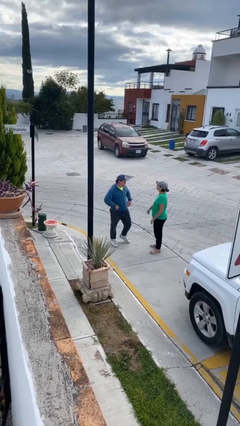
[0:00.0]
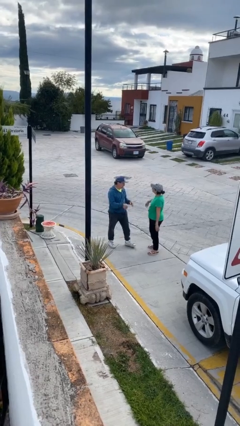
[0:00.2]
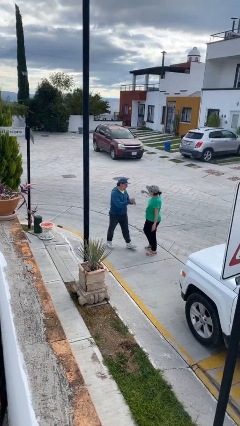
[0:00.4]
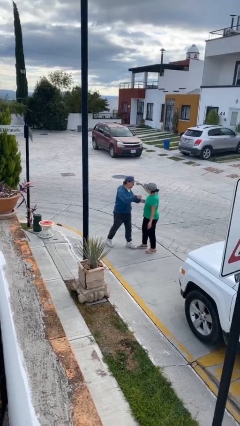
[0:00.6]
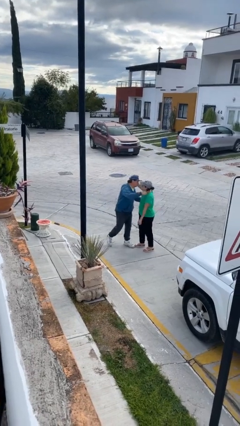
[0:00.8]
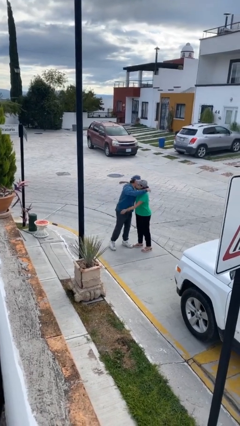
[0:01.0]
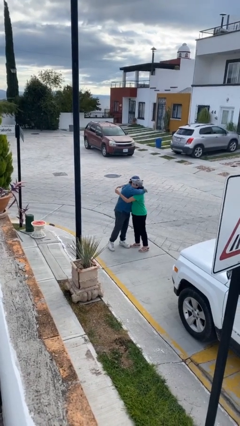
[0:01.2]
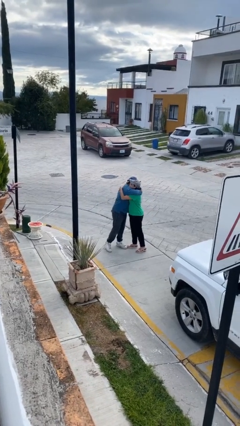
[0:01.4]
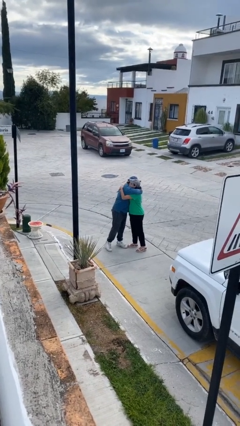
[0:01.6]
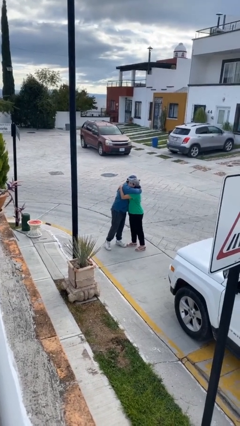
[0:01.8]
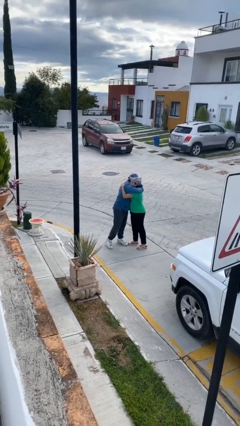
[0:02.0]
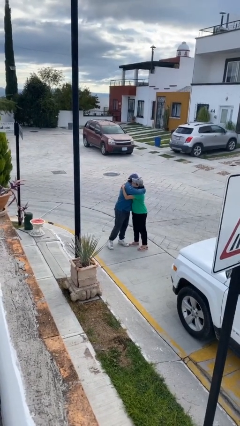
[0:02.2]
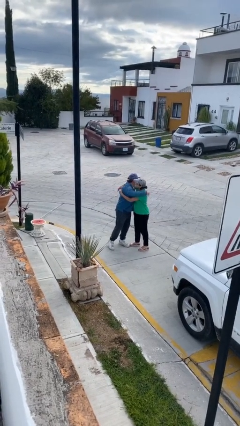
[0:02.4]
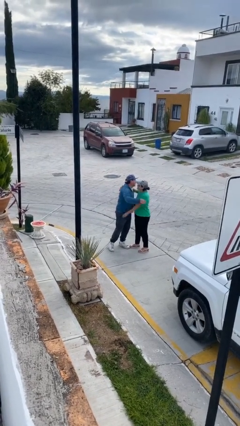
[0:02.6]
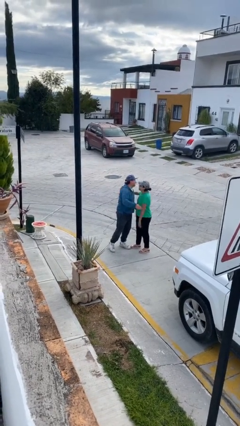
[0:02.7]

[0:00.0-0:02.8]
person embraces person

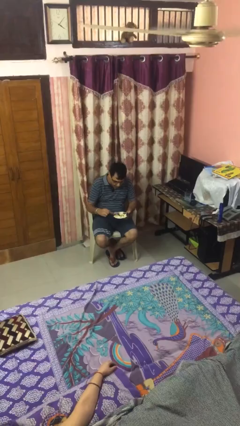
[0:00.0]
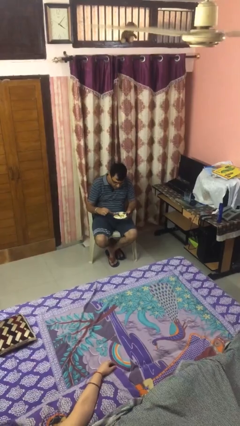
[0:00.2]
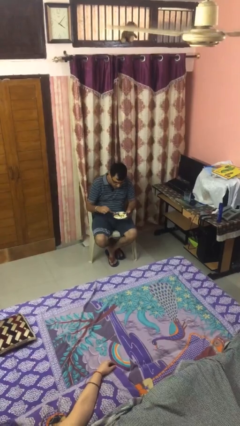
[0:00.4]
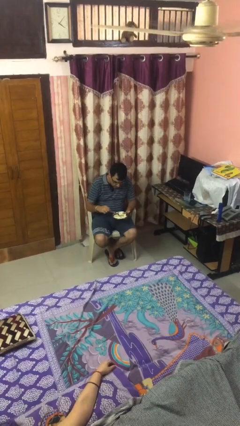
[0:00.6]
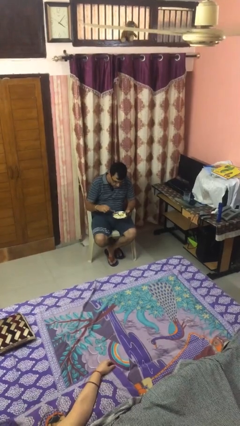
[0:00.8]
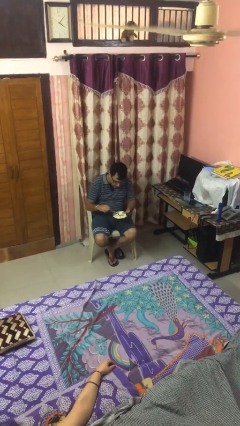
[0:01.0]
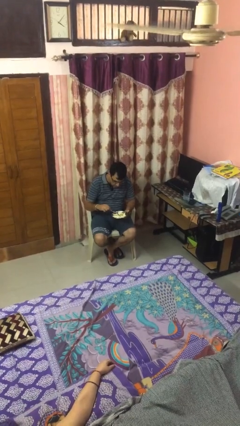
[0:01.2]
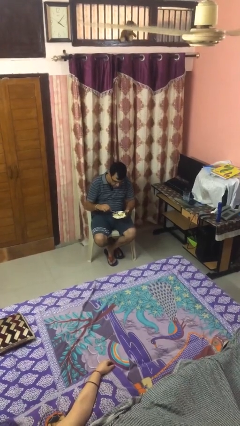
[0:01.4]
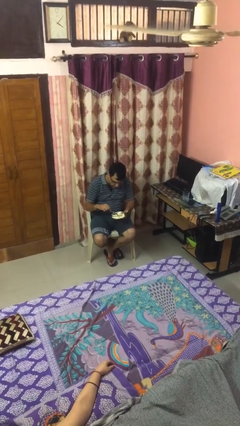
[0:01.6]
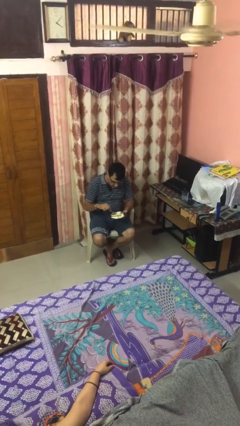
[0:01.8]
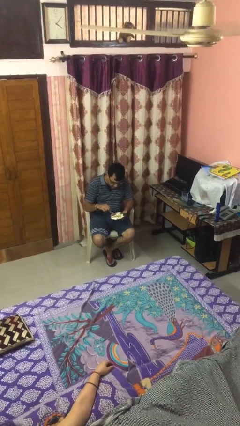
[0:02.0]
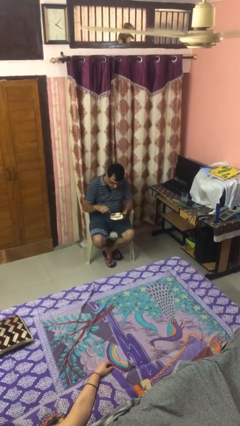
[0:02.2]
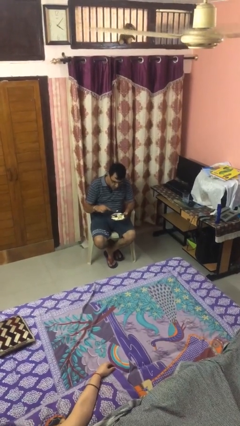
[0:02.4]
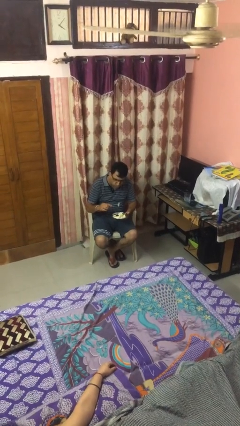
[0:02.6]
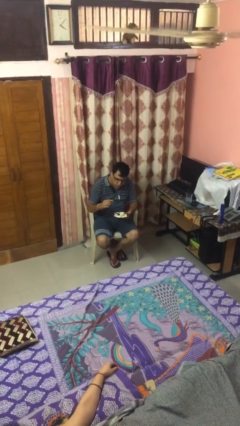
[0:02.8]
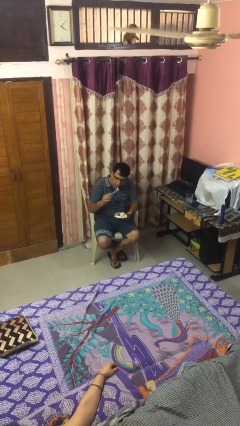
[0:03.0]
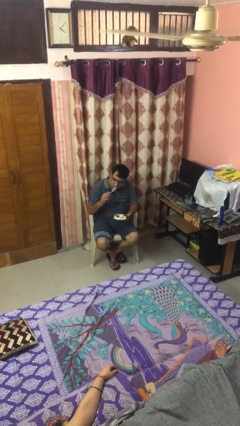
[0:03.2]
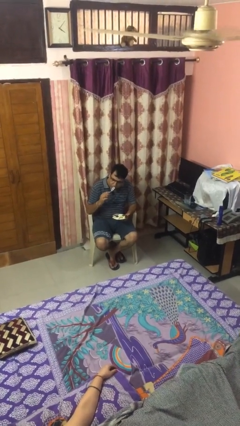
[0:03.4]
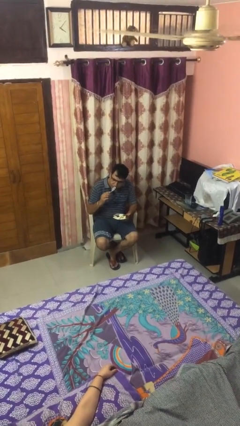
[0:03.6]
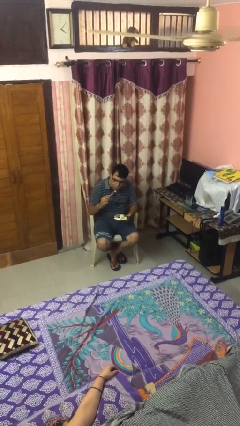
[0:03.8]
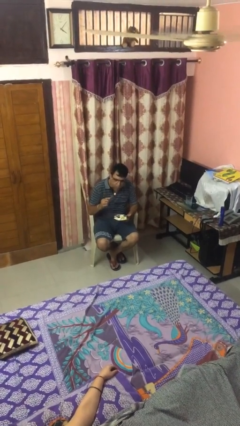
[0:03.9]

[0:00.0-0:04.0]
person eats with utensil

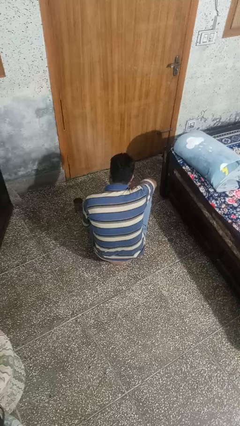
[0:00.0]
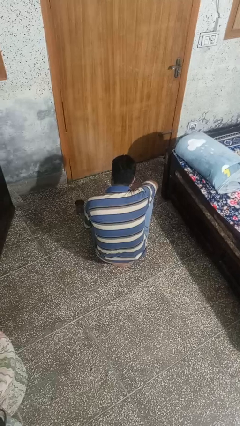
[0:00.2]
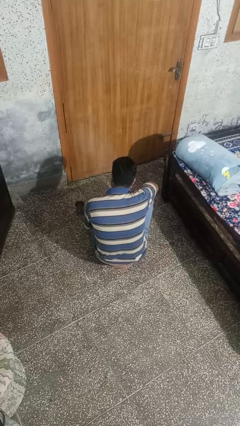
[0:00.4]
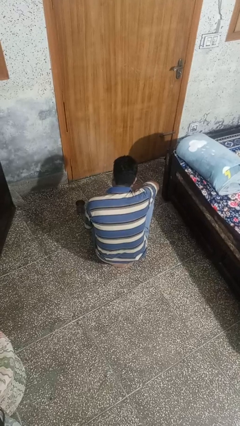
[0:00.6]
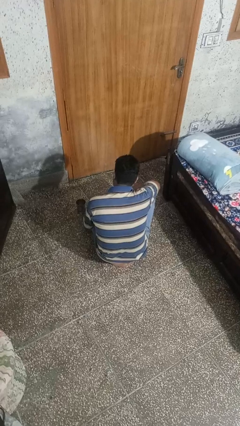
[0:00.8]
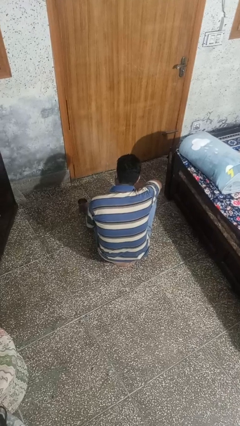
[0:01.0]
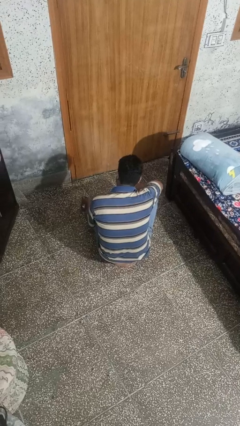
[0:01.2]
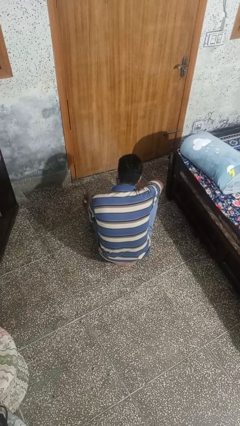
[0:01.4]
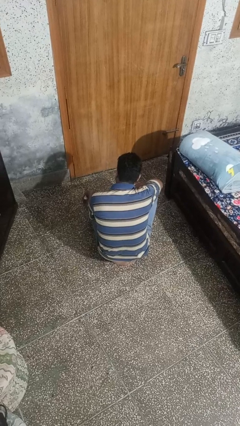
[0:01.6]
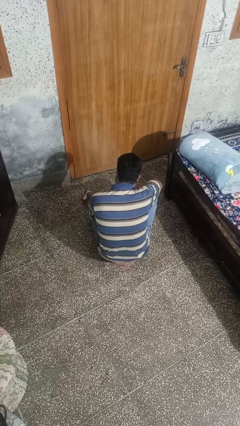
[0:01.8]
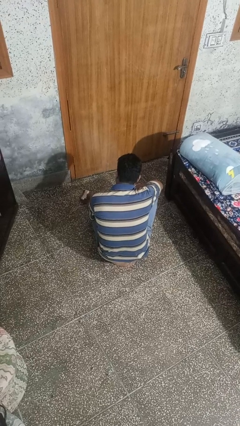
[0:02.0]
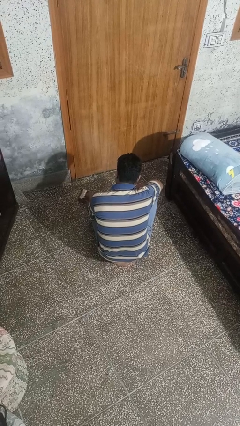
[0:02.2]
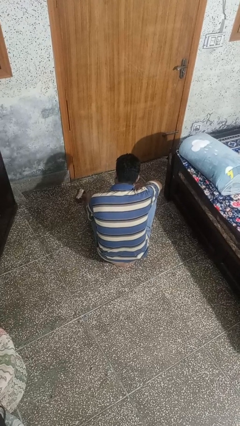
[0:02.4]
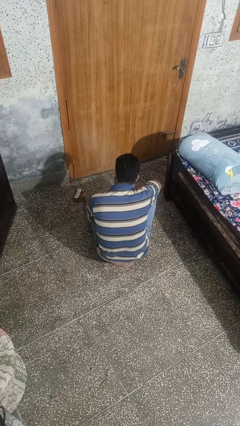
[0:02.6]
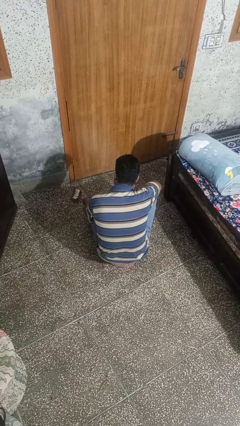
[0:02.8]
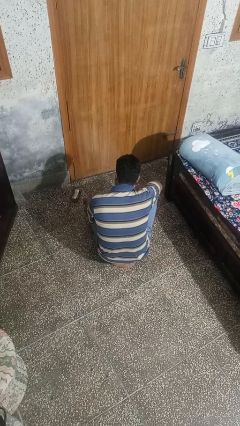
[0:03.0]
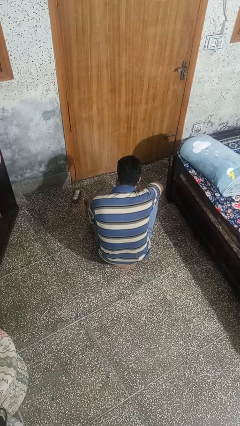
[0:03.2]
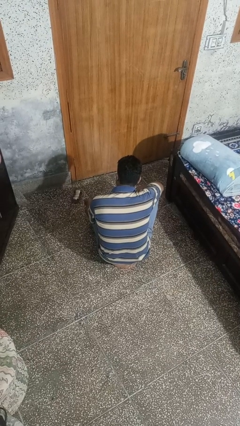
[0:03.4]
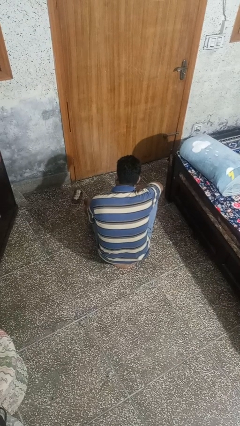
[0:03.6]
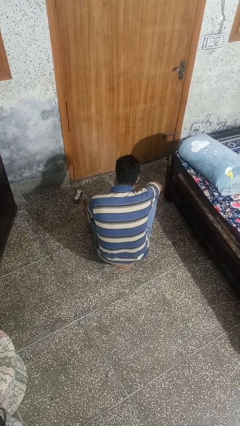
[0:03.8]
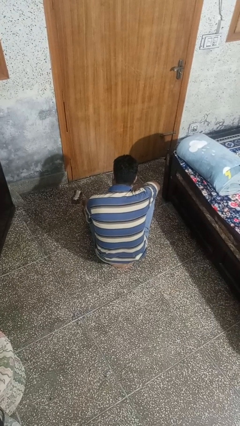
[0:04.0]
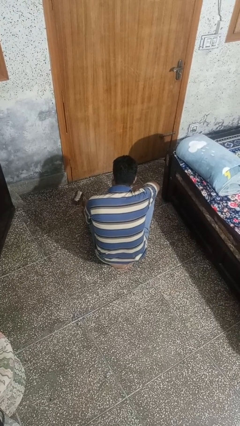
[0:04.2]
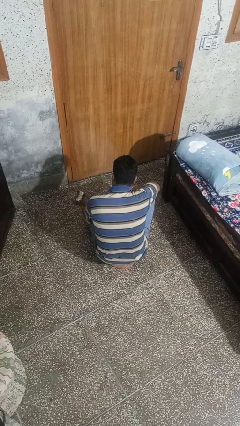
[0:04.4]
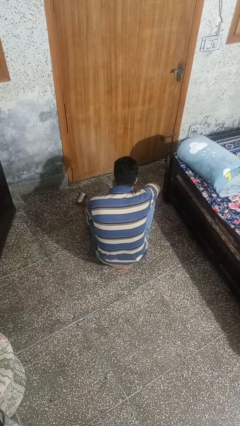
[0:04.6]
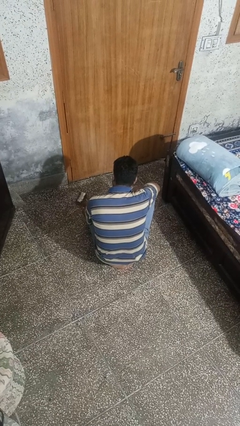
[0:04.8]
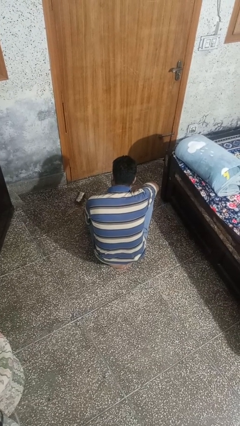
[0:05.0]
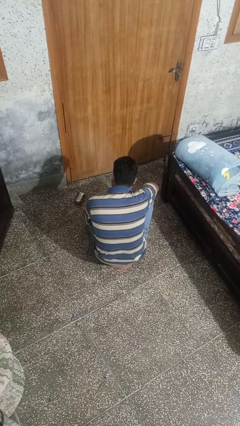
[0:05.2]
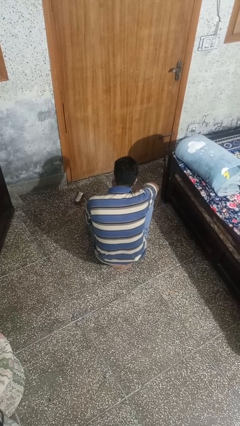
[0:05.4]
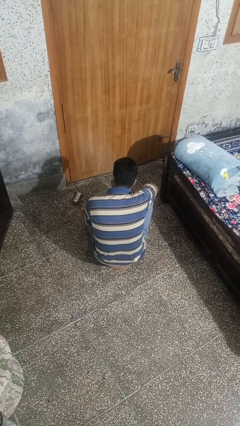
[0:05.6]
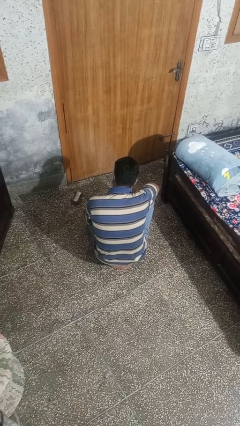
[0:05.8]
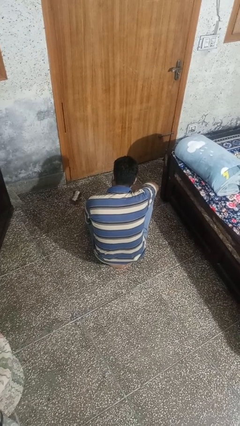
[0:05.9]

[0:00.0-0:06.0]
person spills on floor

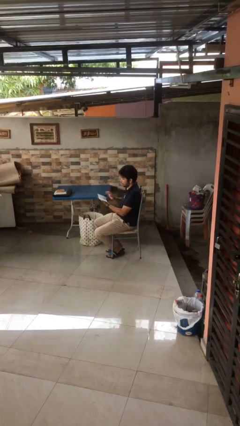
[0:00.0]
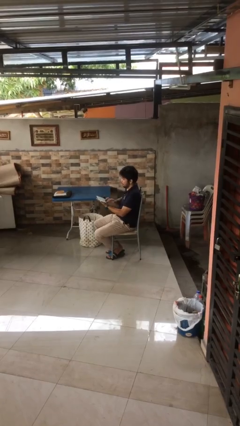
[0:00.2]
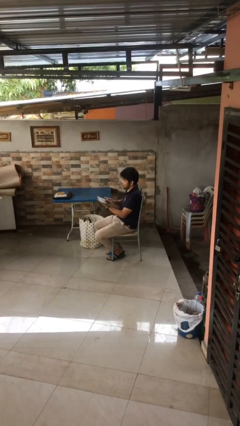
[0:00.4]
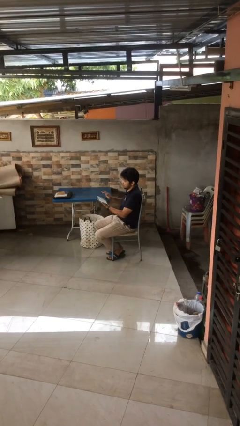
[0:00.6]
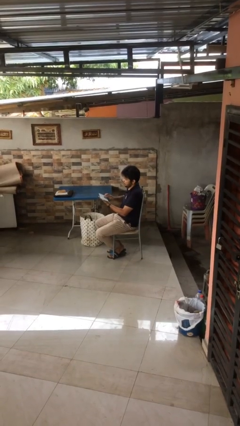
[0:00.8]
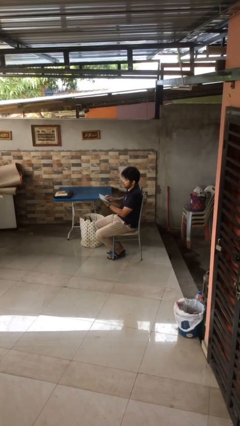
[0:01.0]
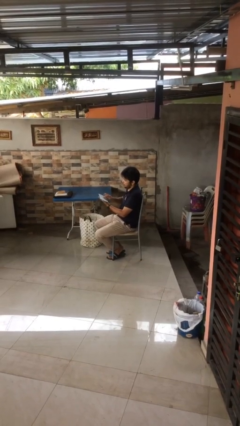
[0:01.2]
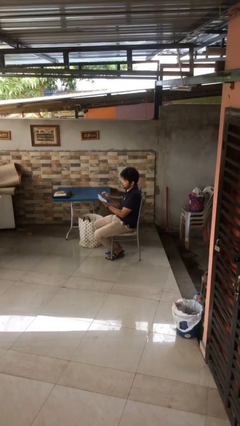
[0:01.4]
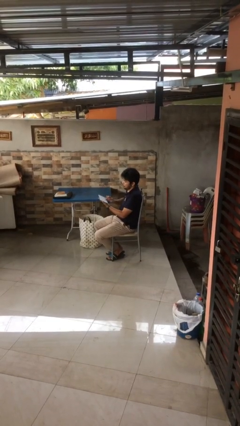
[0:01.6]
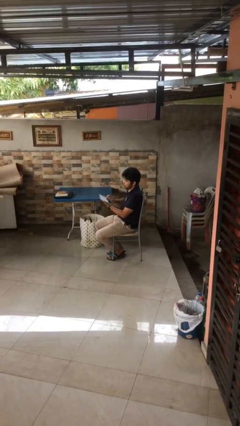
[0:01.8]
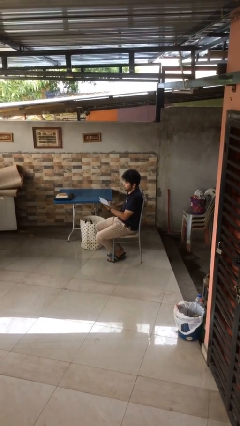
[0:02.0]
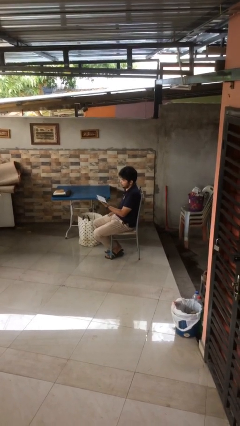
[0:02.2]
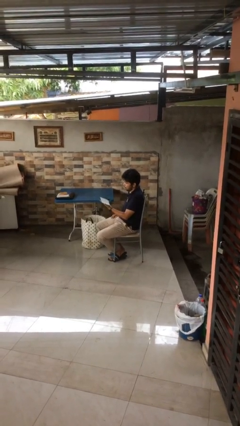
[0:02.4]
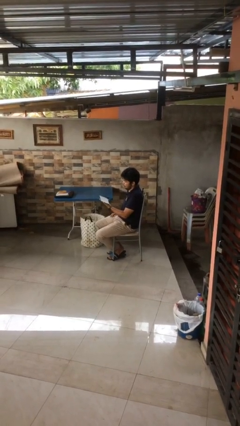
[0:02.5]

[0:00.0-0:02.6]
person interacts with tablet

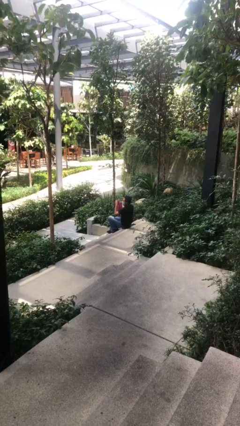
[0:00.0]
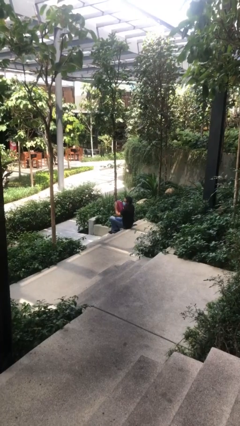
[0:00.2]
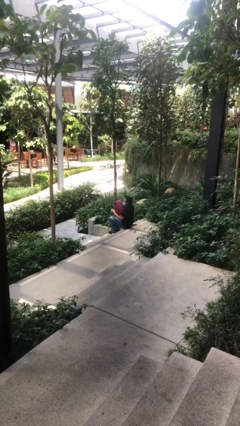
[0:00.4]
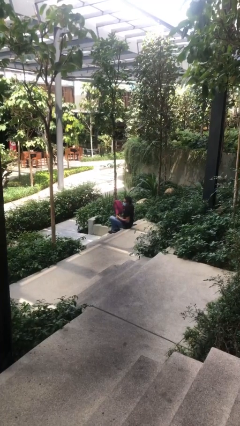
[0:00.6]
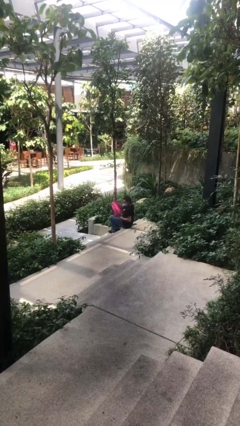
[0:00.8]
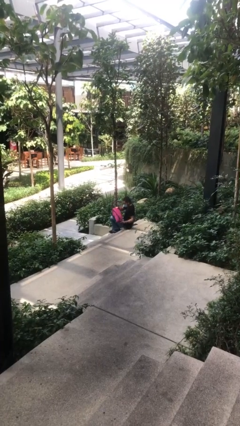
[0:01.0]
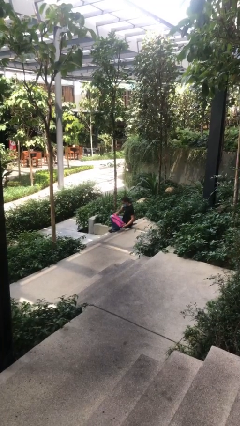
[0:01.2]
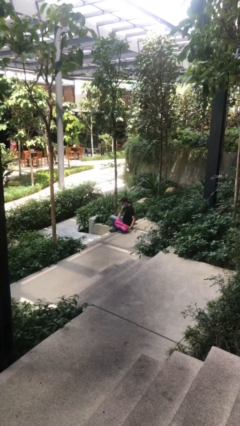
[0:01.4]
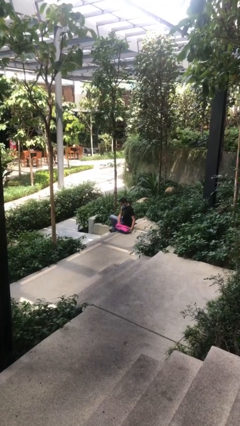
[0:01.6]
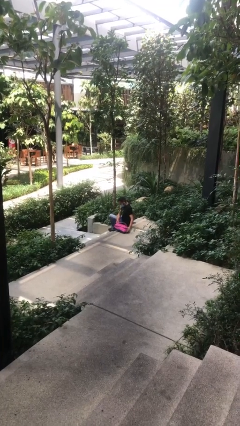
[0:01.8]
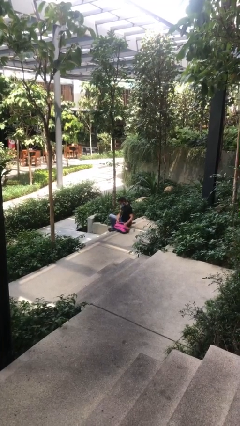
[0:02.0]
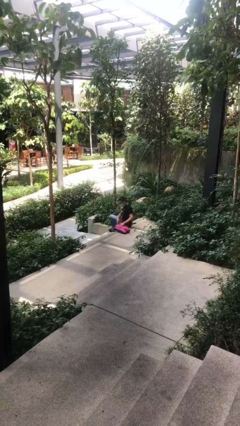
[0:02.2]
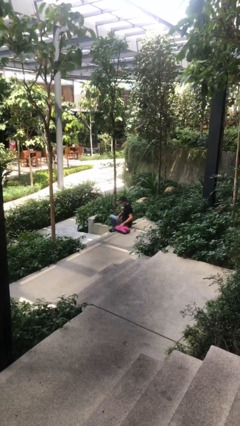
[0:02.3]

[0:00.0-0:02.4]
person puts down object on floor
